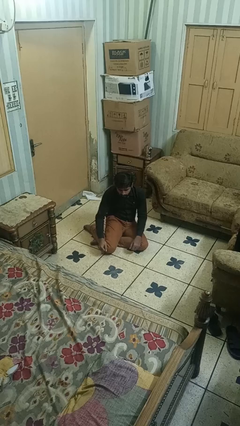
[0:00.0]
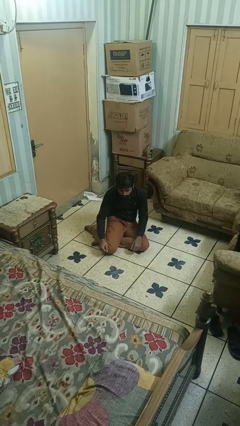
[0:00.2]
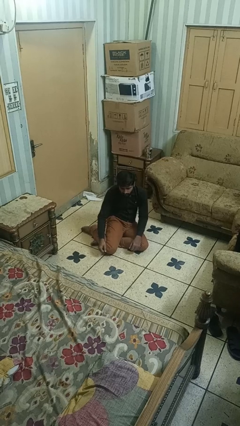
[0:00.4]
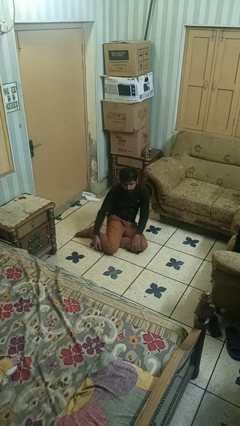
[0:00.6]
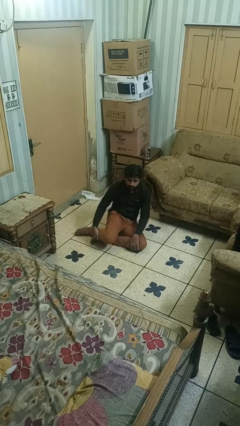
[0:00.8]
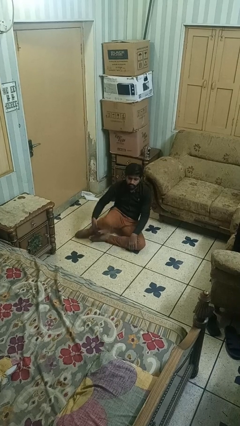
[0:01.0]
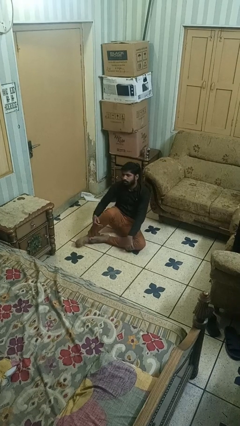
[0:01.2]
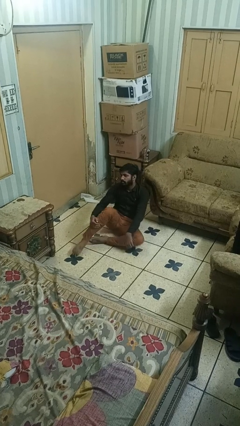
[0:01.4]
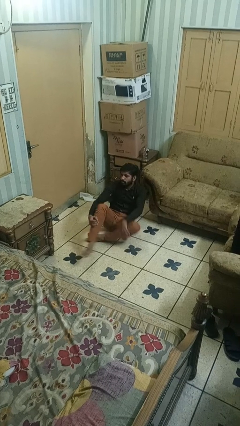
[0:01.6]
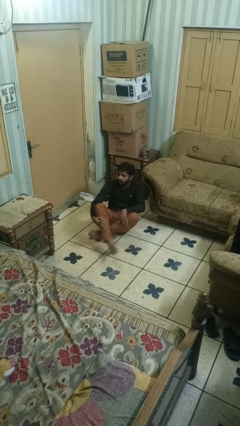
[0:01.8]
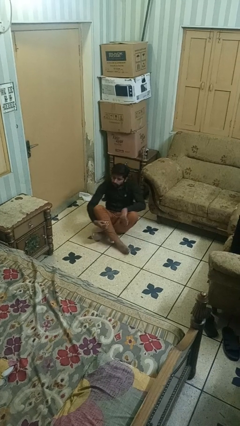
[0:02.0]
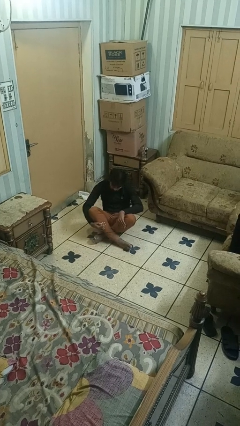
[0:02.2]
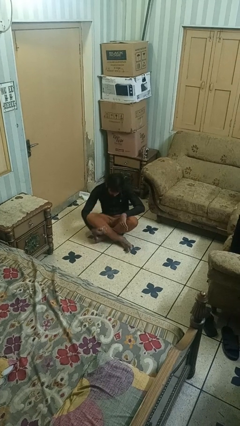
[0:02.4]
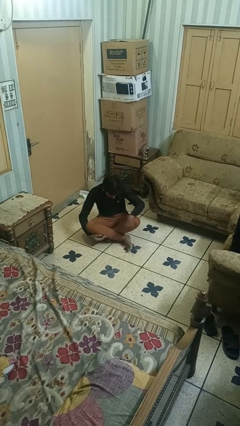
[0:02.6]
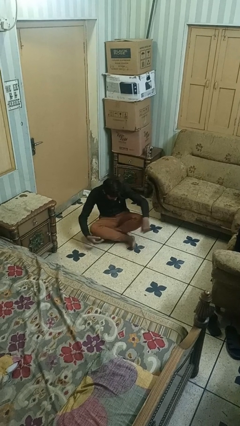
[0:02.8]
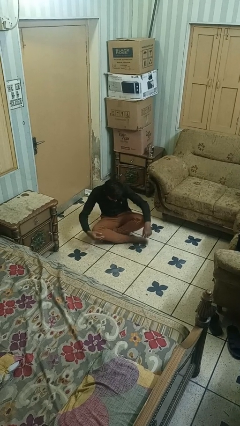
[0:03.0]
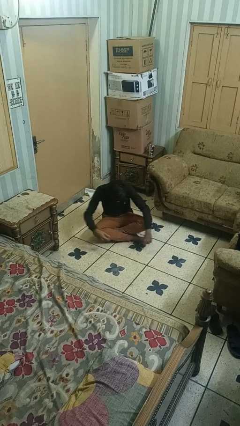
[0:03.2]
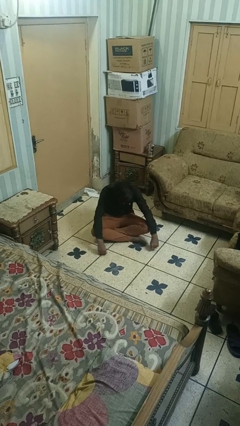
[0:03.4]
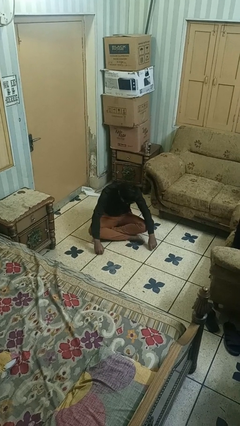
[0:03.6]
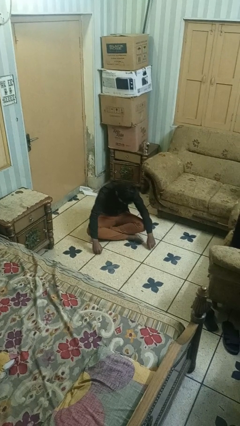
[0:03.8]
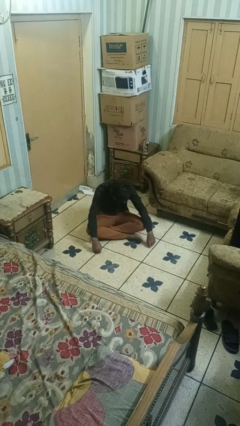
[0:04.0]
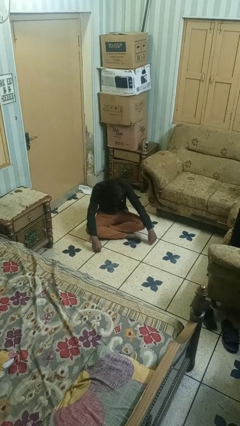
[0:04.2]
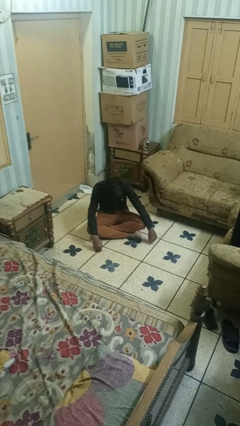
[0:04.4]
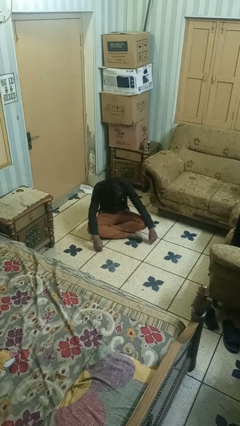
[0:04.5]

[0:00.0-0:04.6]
person crosses legs

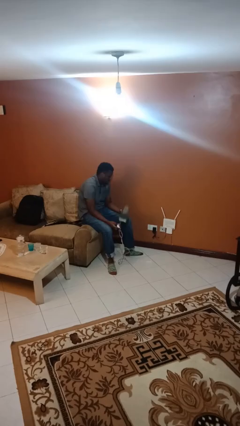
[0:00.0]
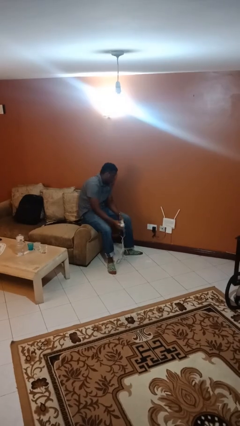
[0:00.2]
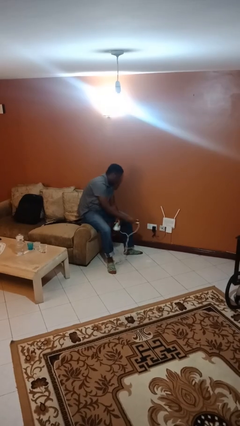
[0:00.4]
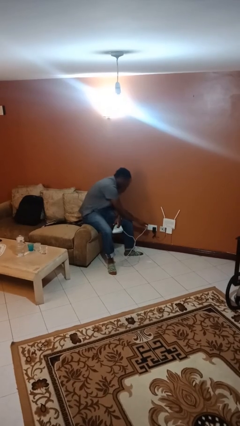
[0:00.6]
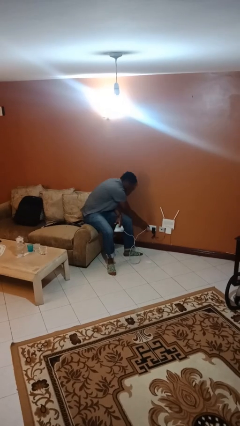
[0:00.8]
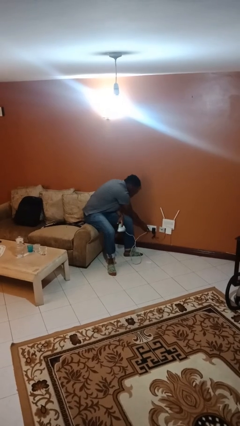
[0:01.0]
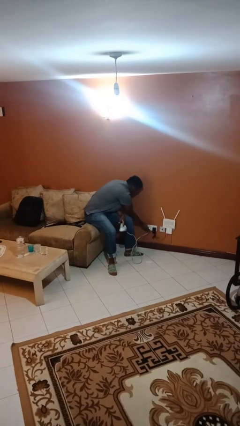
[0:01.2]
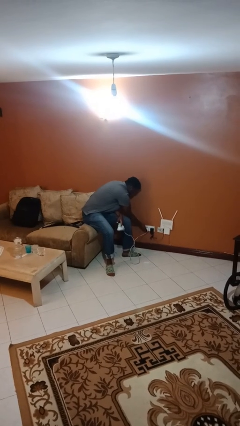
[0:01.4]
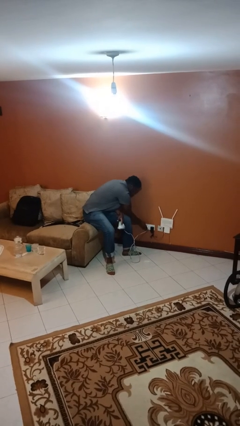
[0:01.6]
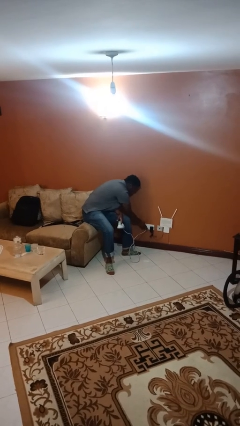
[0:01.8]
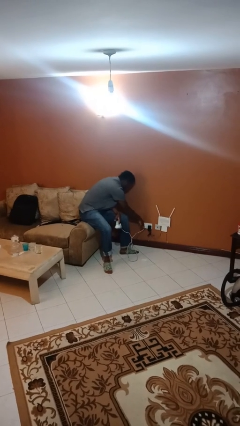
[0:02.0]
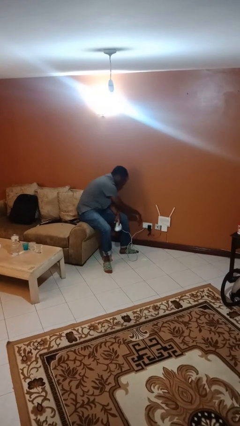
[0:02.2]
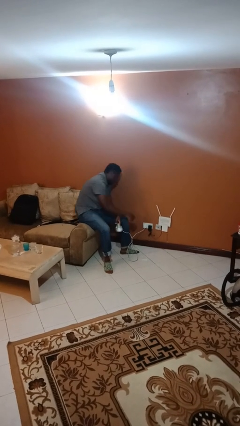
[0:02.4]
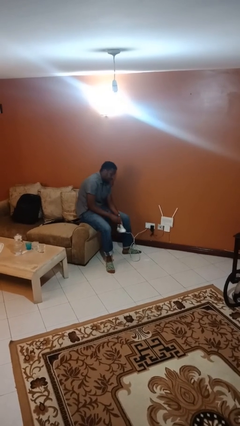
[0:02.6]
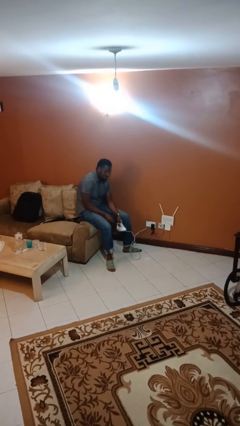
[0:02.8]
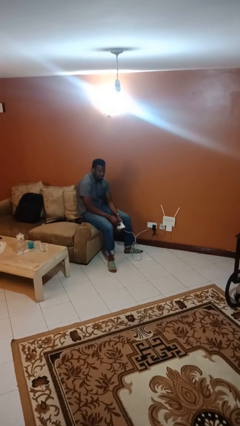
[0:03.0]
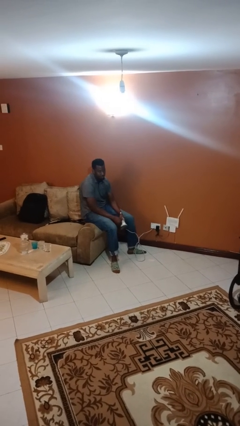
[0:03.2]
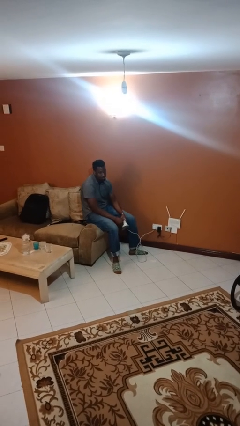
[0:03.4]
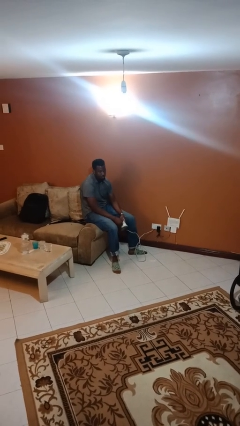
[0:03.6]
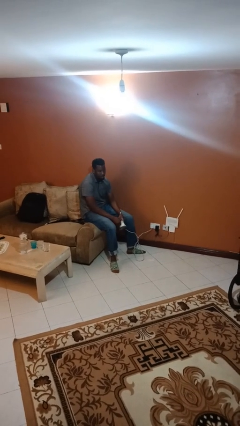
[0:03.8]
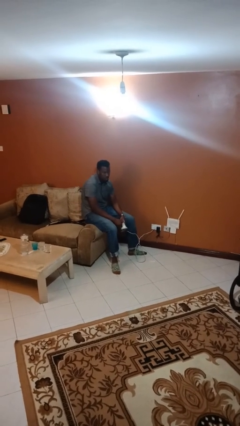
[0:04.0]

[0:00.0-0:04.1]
person plugs into electrical socket

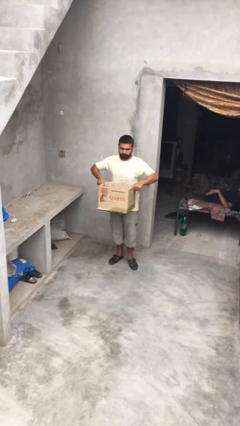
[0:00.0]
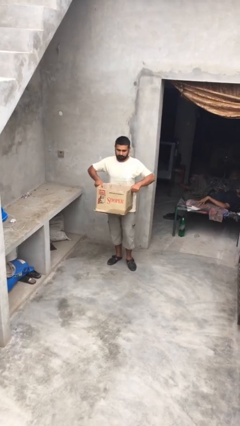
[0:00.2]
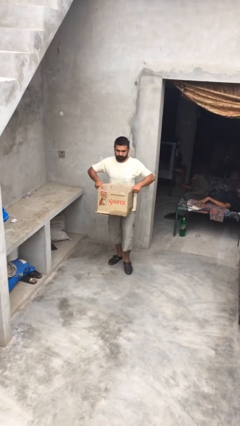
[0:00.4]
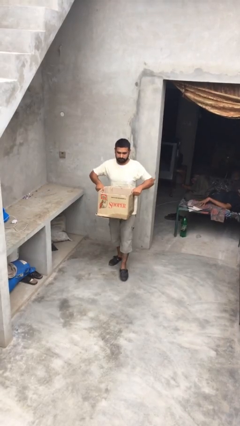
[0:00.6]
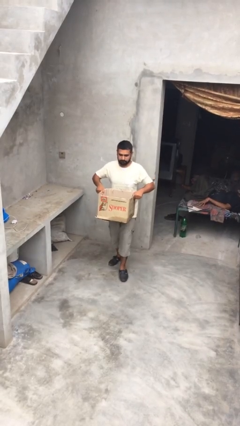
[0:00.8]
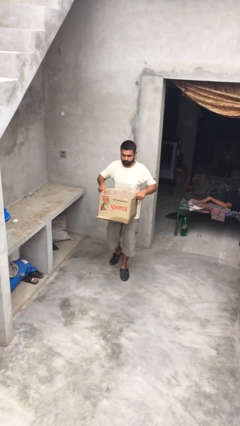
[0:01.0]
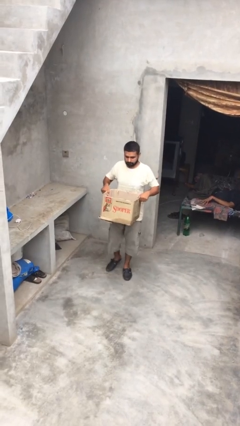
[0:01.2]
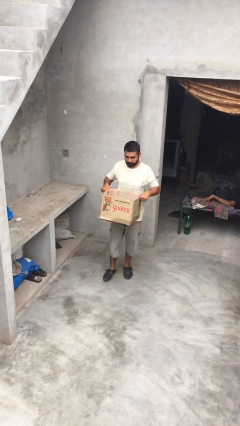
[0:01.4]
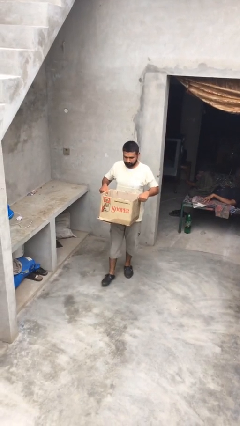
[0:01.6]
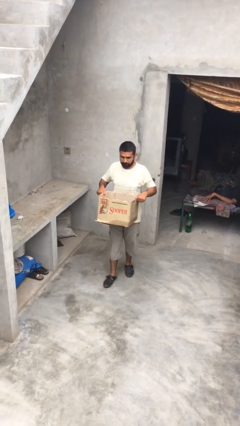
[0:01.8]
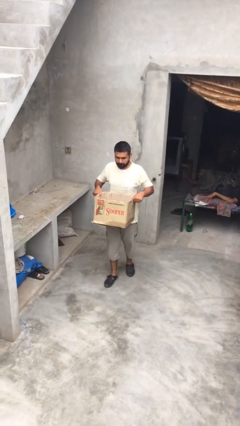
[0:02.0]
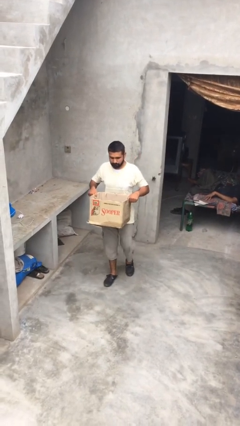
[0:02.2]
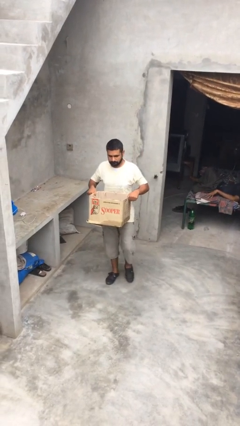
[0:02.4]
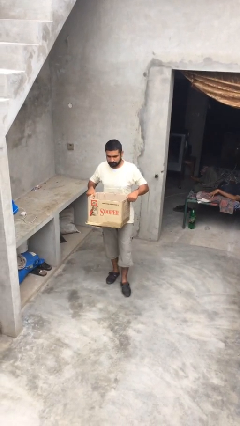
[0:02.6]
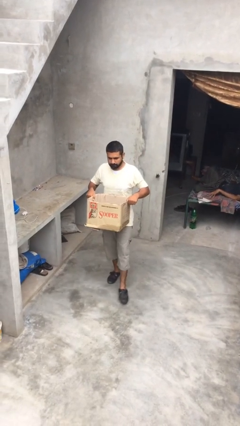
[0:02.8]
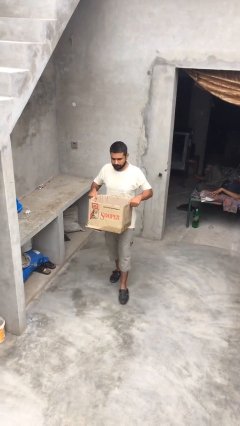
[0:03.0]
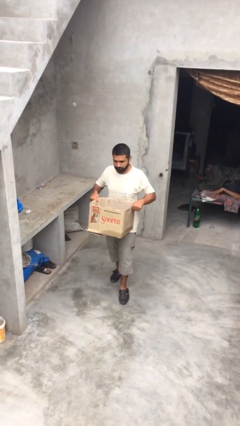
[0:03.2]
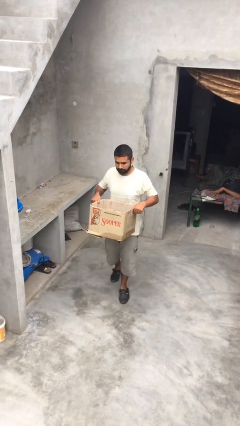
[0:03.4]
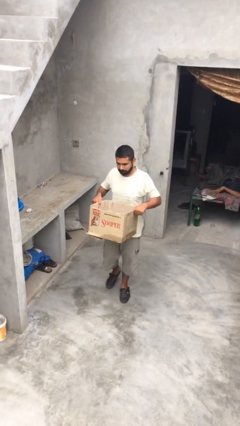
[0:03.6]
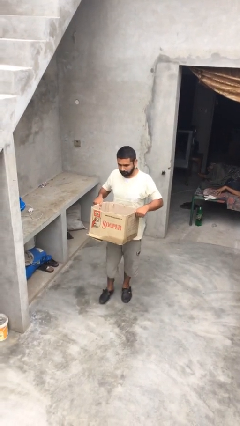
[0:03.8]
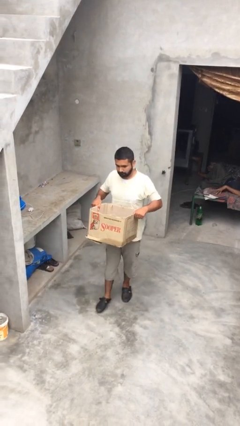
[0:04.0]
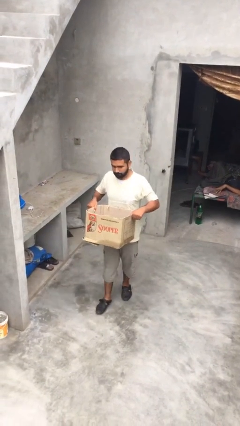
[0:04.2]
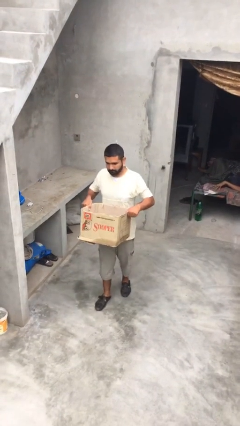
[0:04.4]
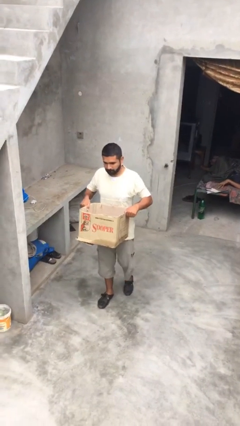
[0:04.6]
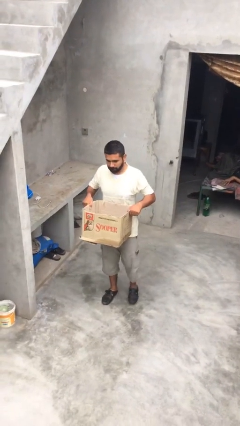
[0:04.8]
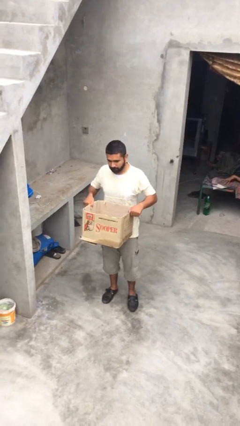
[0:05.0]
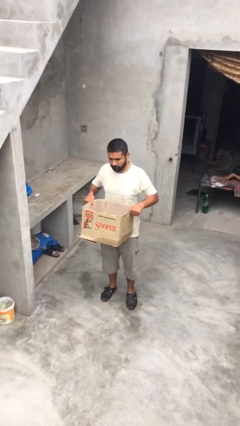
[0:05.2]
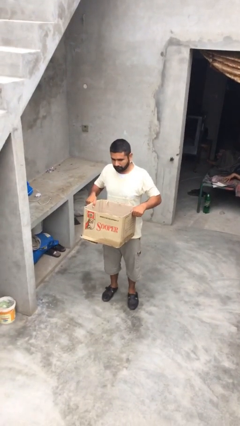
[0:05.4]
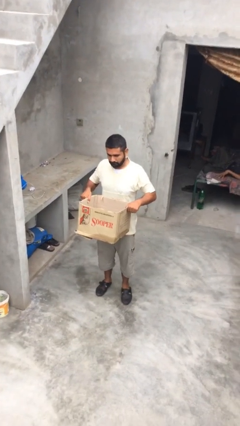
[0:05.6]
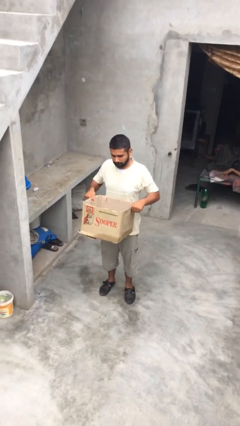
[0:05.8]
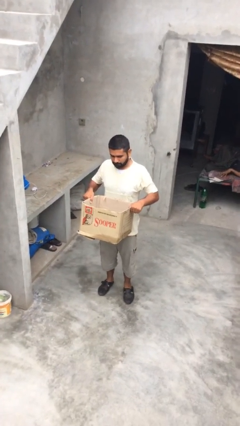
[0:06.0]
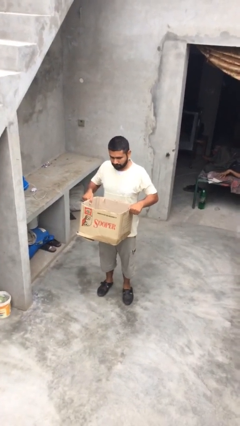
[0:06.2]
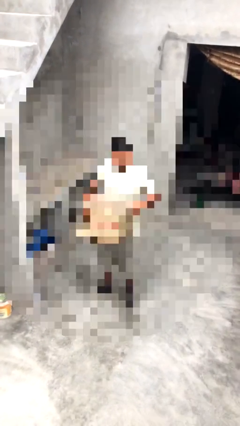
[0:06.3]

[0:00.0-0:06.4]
person carries heavy object

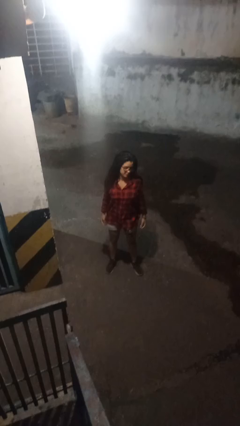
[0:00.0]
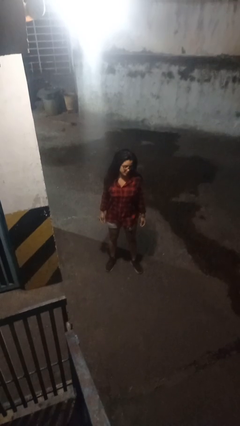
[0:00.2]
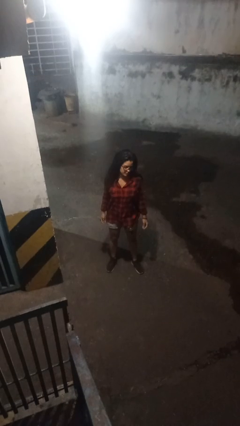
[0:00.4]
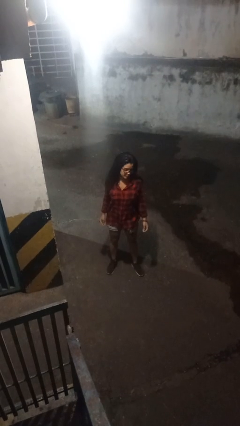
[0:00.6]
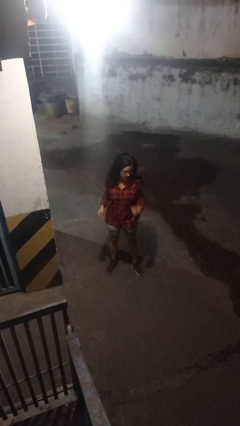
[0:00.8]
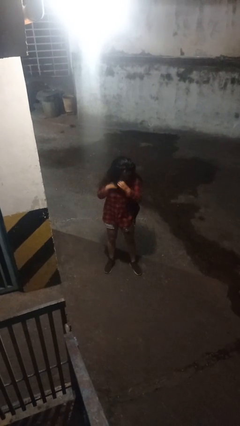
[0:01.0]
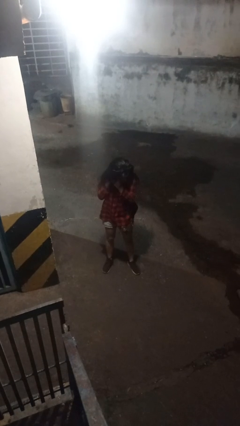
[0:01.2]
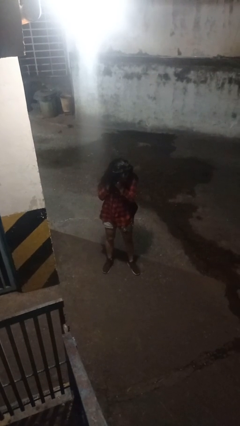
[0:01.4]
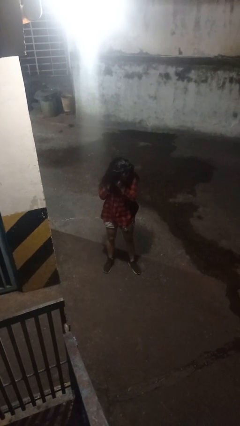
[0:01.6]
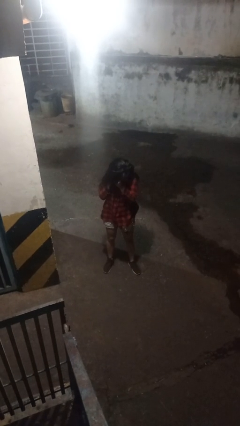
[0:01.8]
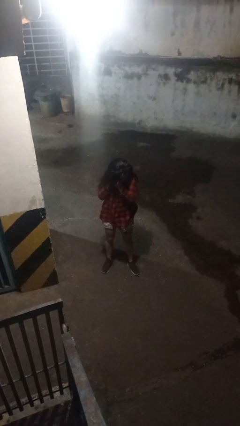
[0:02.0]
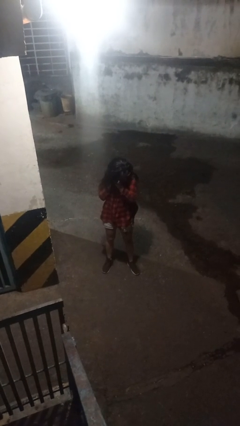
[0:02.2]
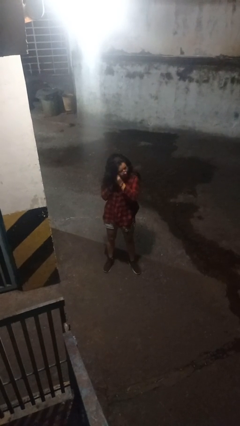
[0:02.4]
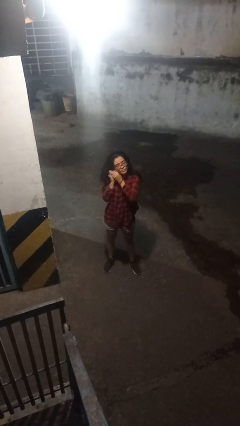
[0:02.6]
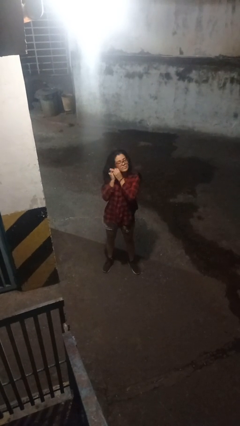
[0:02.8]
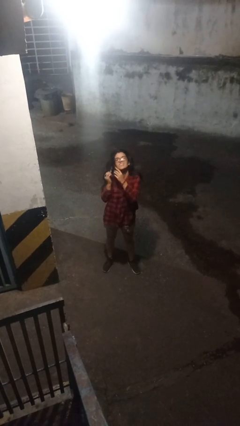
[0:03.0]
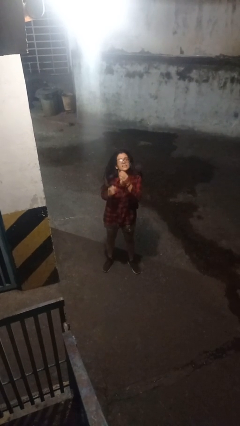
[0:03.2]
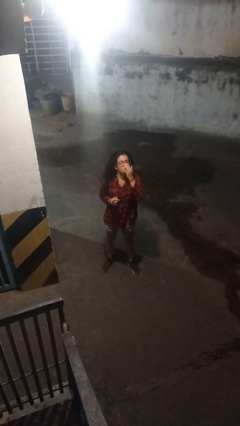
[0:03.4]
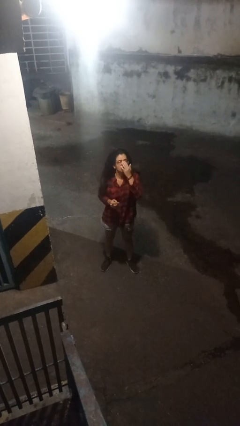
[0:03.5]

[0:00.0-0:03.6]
person puts on earrings
